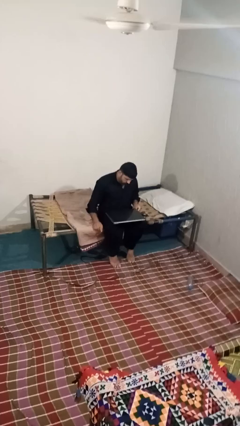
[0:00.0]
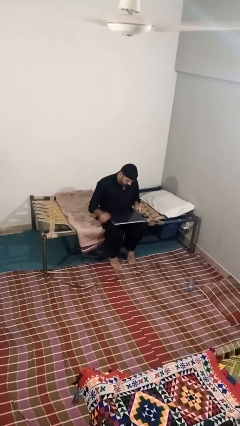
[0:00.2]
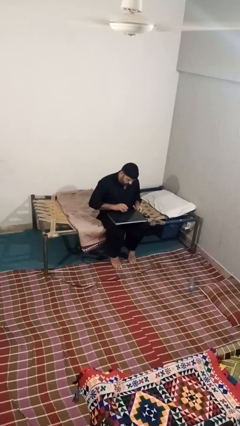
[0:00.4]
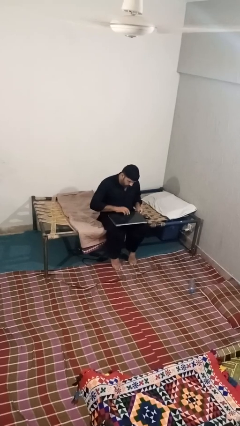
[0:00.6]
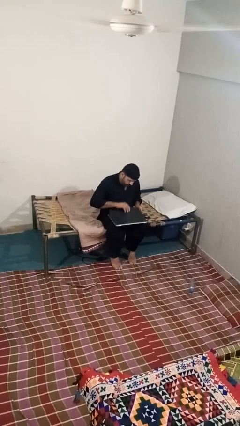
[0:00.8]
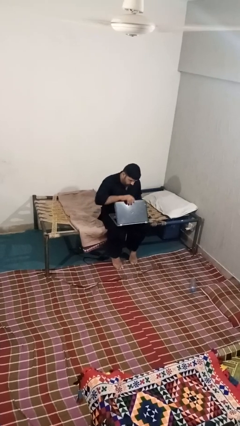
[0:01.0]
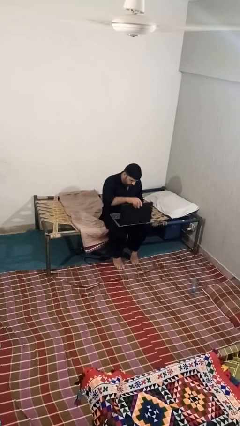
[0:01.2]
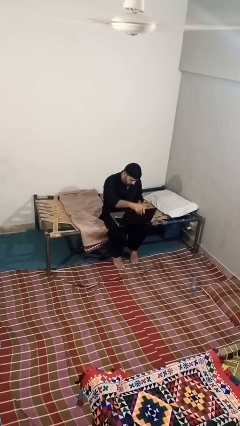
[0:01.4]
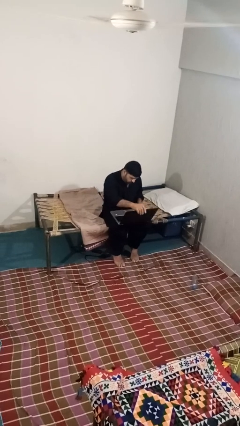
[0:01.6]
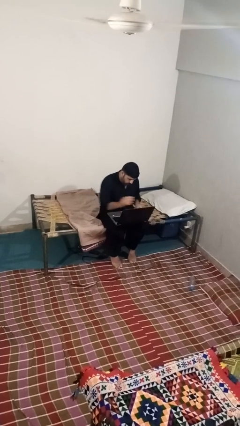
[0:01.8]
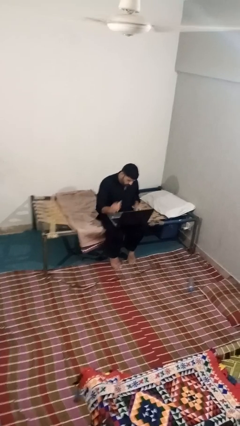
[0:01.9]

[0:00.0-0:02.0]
person opens laptop

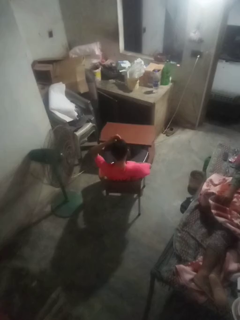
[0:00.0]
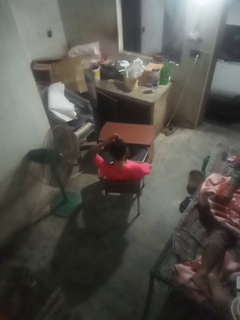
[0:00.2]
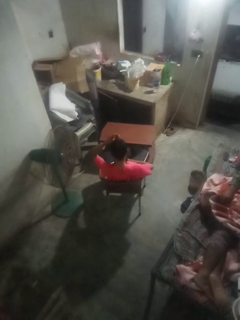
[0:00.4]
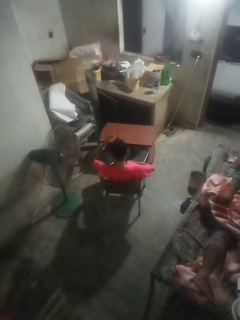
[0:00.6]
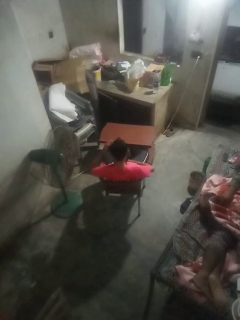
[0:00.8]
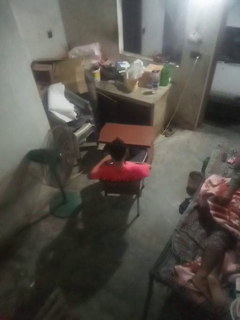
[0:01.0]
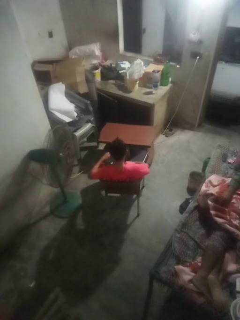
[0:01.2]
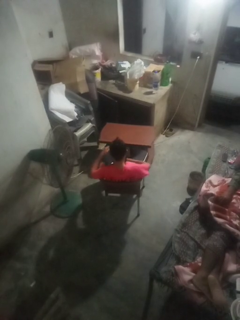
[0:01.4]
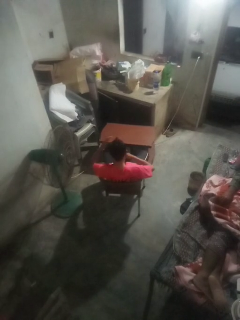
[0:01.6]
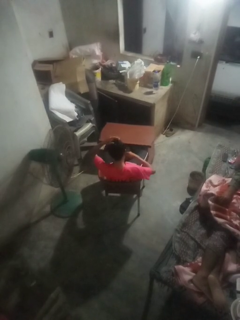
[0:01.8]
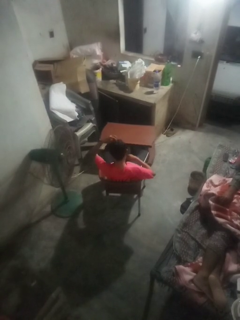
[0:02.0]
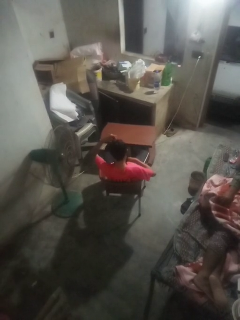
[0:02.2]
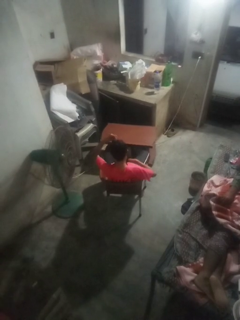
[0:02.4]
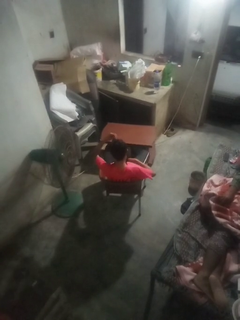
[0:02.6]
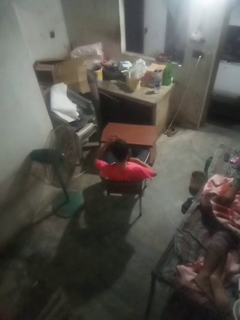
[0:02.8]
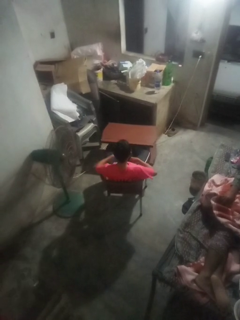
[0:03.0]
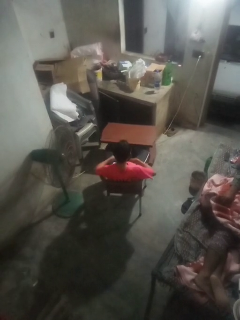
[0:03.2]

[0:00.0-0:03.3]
person takes off hairtie

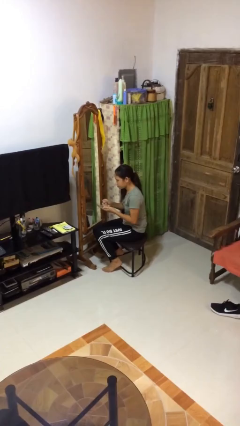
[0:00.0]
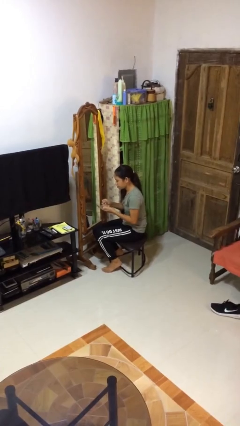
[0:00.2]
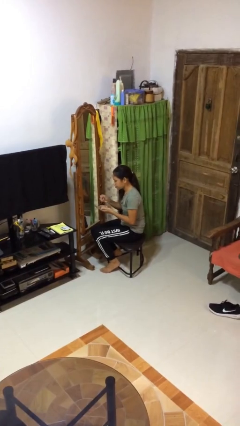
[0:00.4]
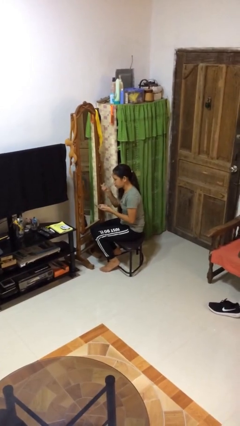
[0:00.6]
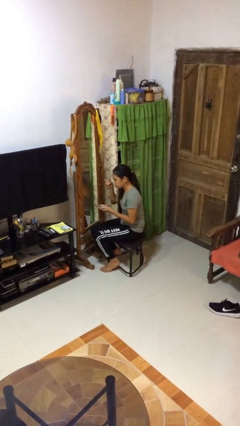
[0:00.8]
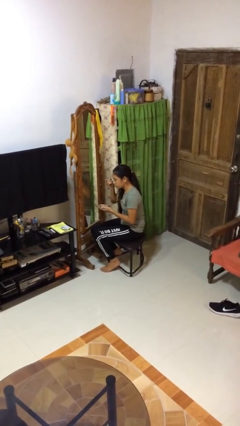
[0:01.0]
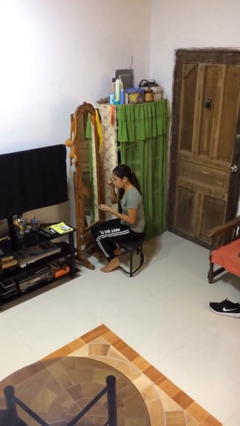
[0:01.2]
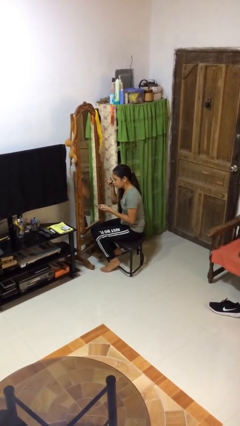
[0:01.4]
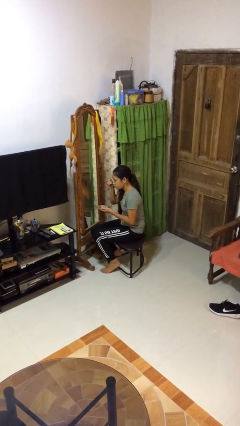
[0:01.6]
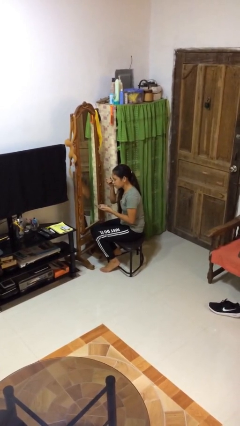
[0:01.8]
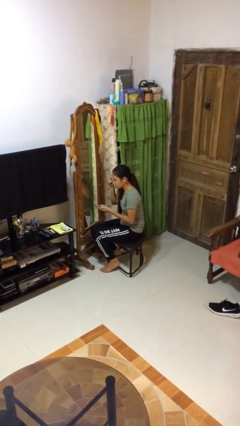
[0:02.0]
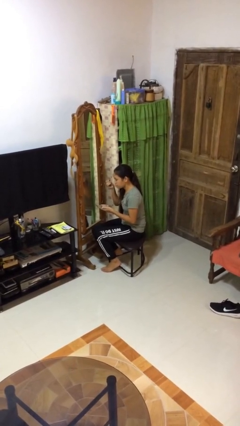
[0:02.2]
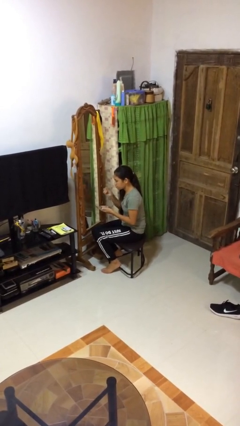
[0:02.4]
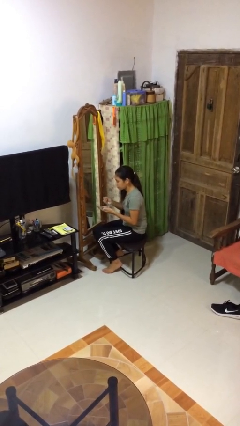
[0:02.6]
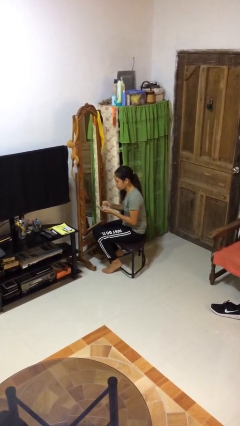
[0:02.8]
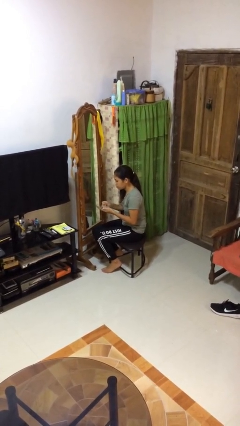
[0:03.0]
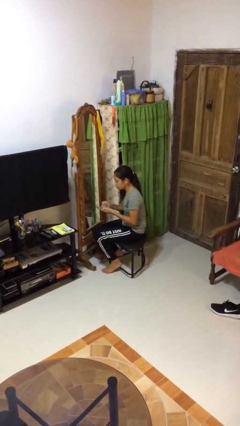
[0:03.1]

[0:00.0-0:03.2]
person applies eye makeup

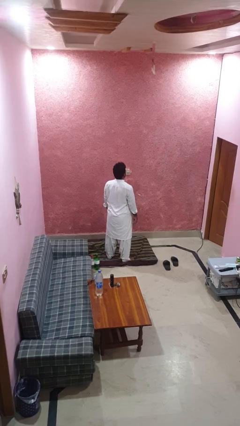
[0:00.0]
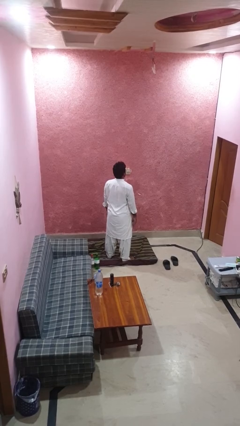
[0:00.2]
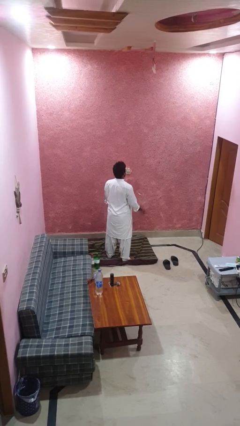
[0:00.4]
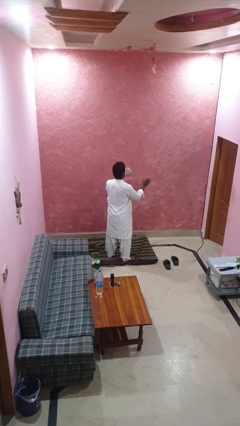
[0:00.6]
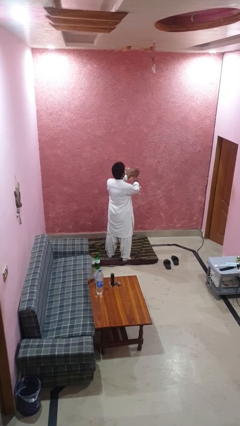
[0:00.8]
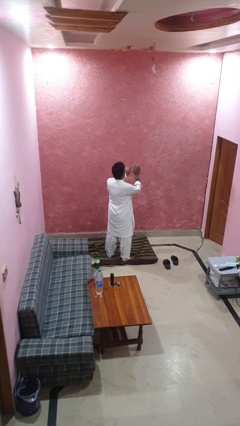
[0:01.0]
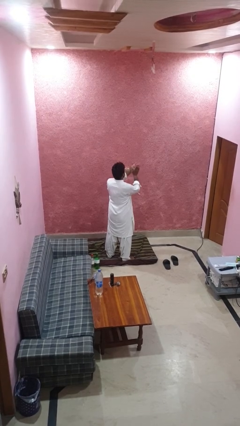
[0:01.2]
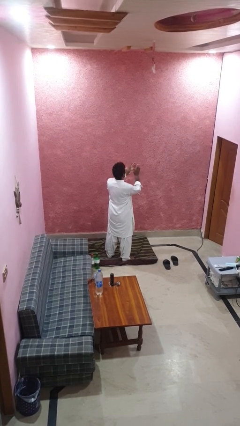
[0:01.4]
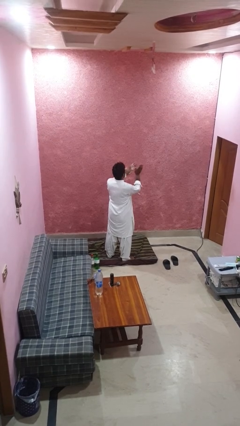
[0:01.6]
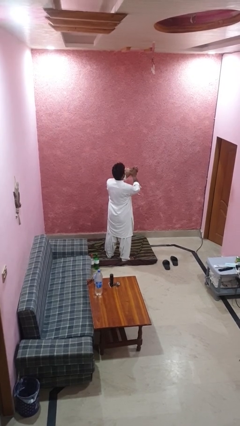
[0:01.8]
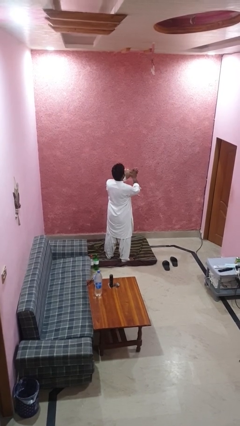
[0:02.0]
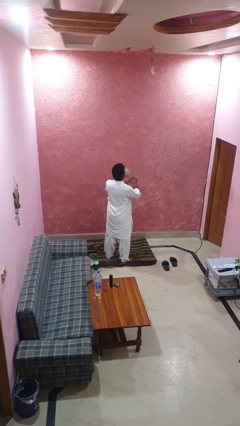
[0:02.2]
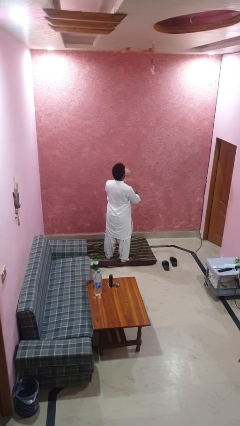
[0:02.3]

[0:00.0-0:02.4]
person claps hands

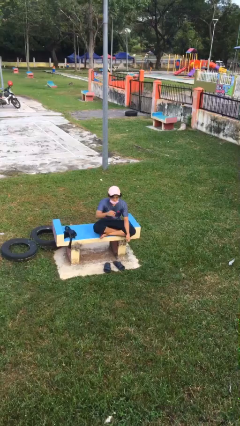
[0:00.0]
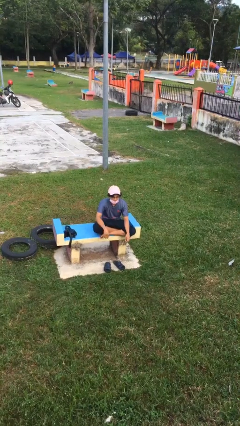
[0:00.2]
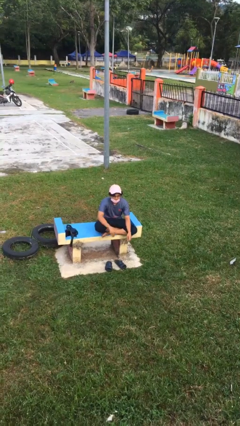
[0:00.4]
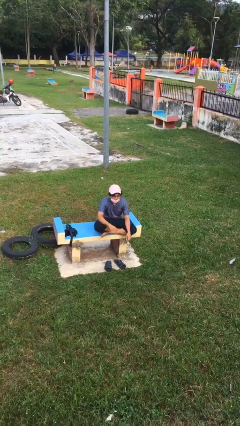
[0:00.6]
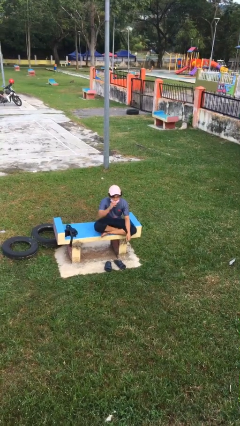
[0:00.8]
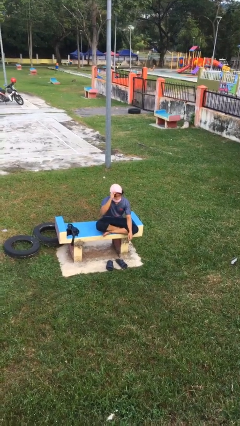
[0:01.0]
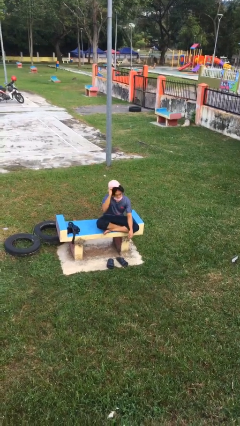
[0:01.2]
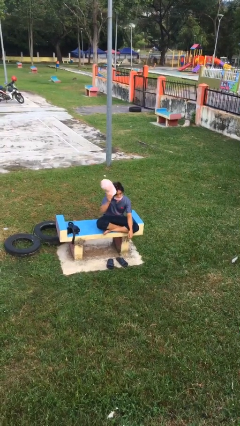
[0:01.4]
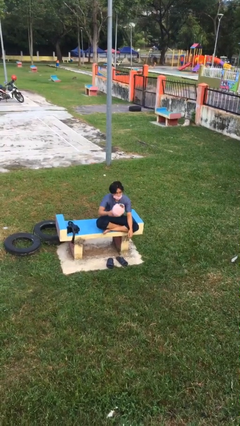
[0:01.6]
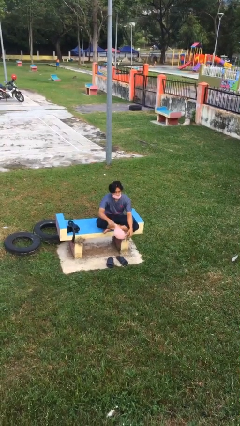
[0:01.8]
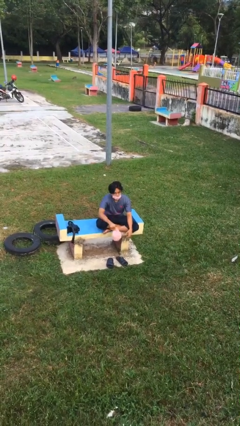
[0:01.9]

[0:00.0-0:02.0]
person takes off hat

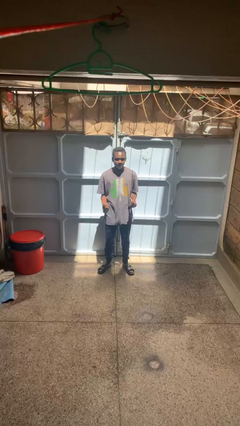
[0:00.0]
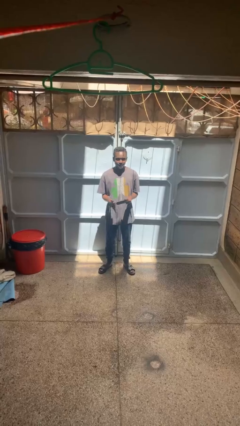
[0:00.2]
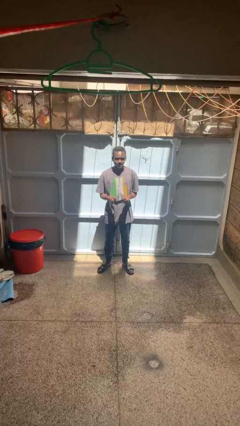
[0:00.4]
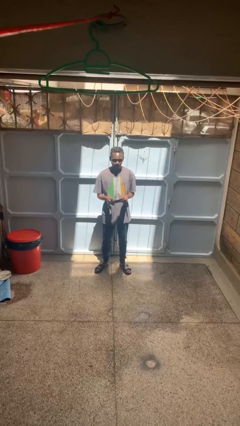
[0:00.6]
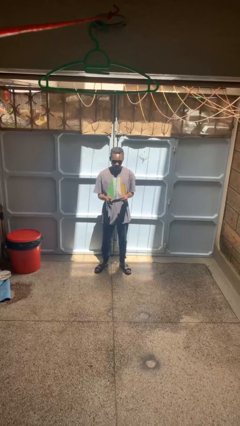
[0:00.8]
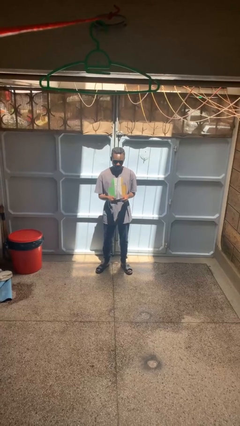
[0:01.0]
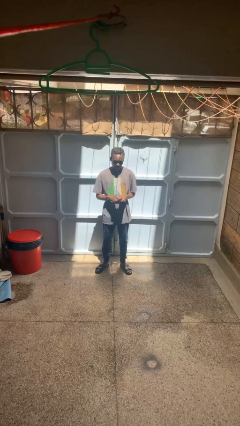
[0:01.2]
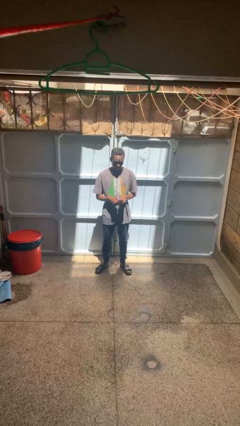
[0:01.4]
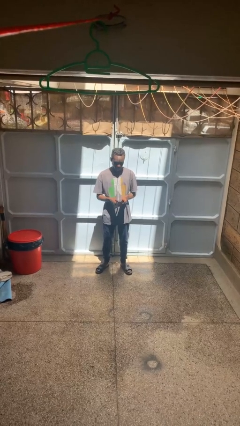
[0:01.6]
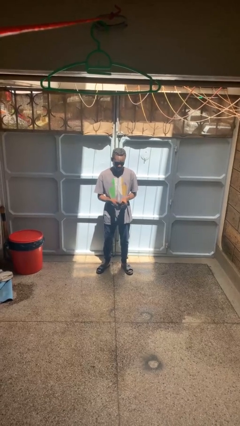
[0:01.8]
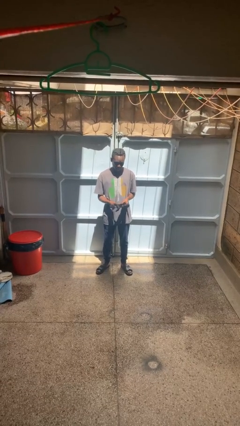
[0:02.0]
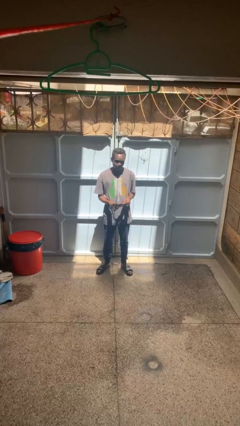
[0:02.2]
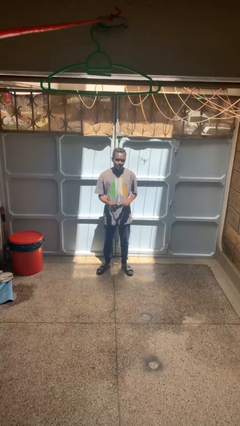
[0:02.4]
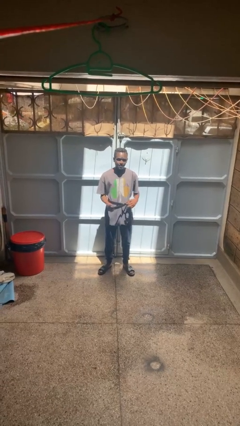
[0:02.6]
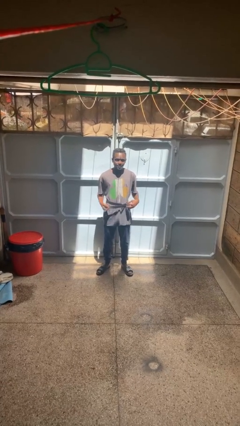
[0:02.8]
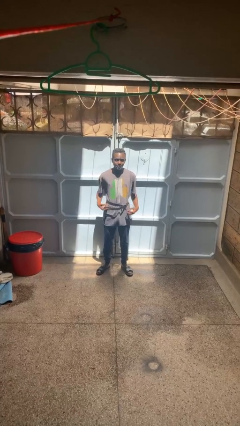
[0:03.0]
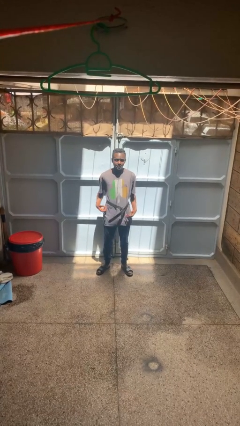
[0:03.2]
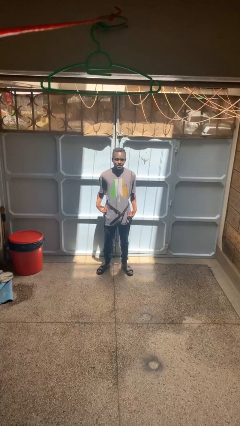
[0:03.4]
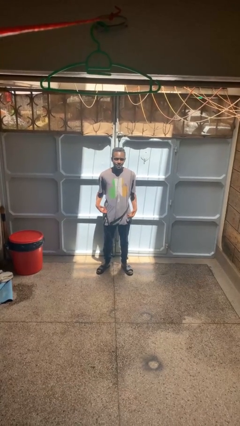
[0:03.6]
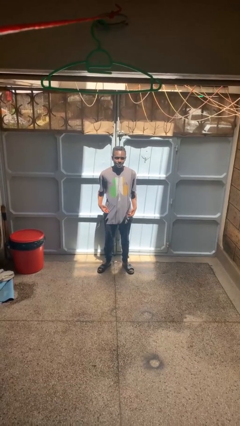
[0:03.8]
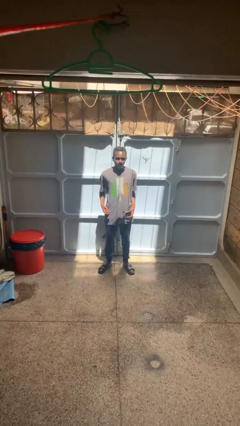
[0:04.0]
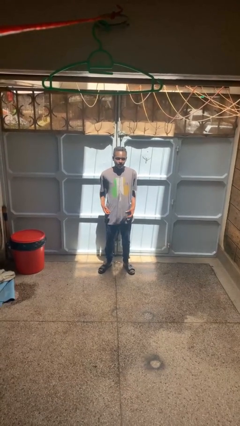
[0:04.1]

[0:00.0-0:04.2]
person puts on belt

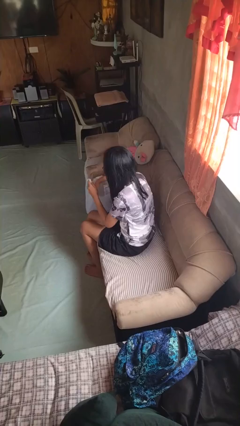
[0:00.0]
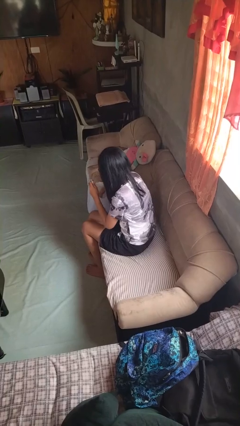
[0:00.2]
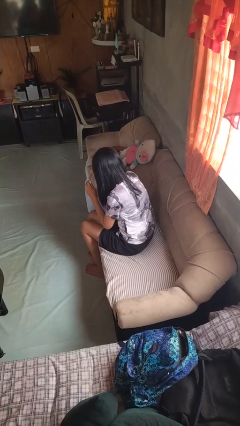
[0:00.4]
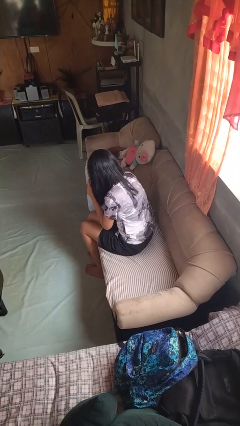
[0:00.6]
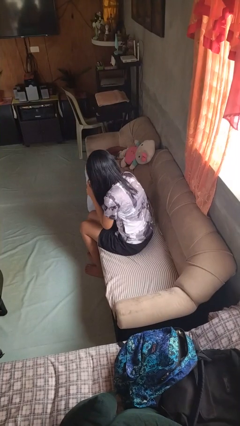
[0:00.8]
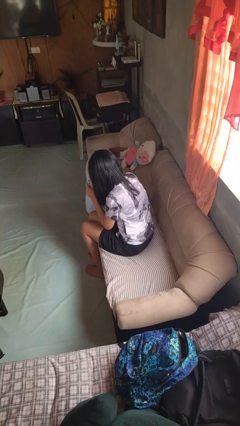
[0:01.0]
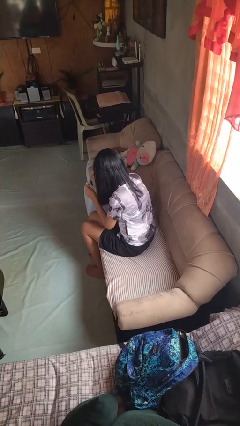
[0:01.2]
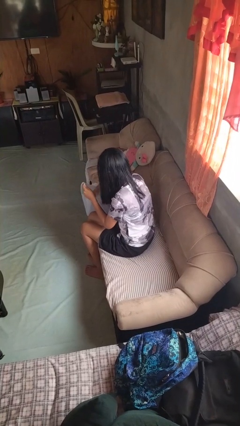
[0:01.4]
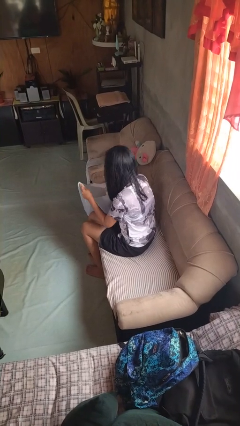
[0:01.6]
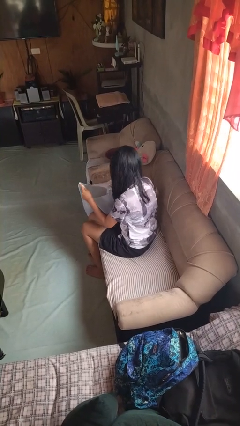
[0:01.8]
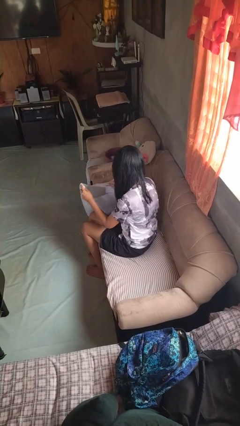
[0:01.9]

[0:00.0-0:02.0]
person searches in bag
